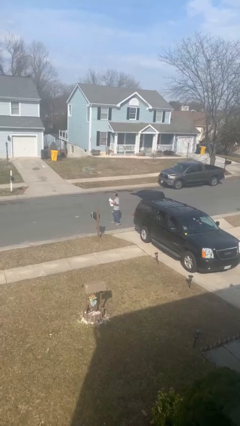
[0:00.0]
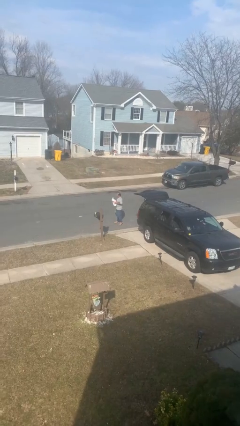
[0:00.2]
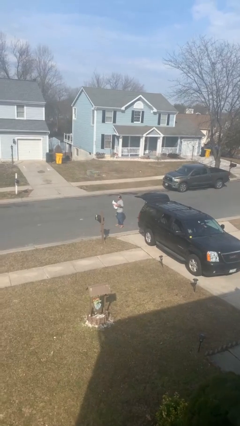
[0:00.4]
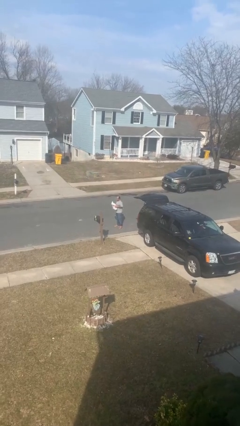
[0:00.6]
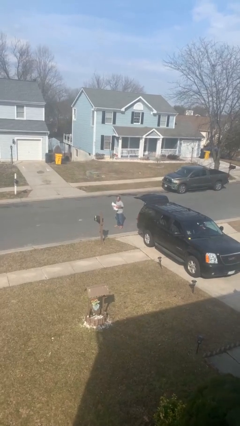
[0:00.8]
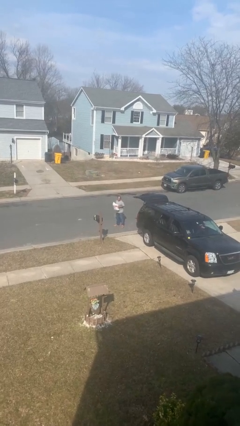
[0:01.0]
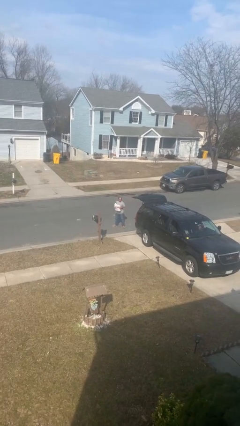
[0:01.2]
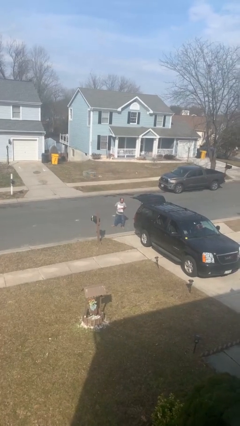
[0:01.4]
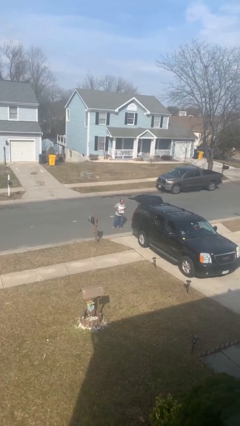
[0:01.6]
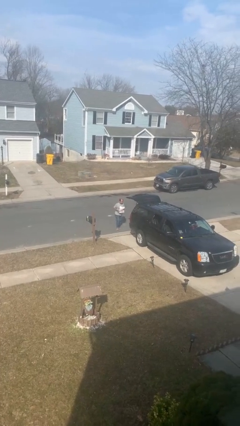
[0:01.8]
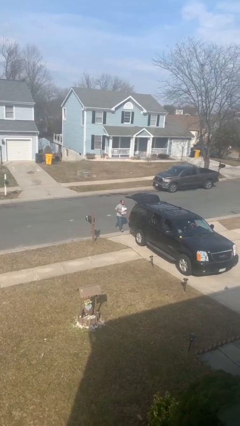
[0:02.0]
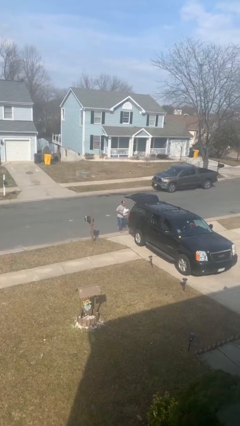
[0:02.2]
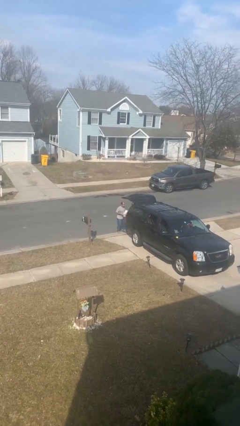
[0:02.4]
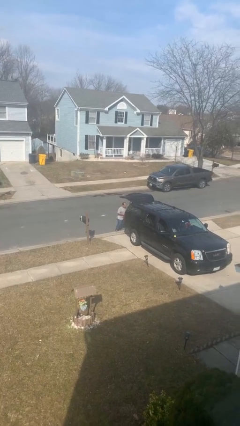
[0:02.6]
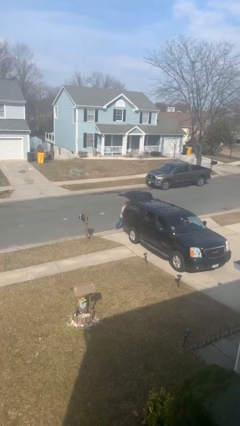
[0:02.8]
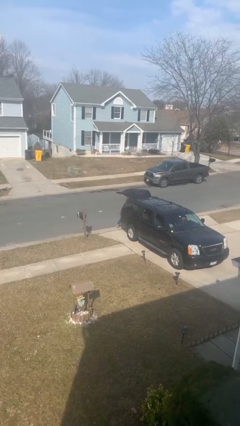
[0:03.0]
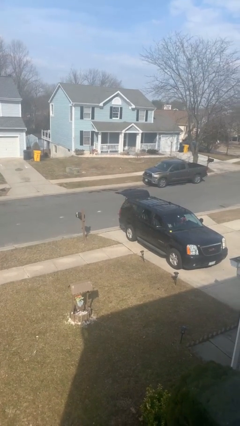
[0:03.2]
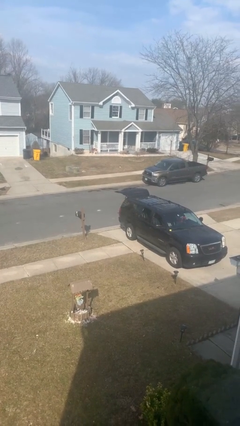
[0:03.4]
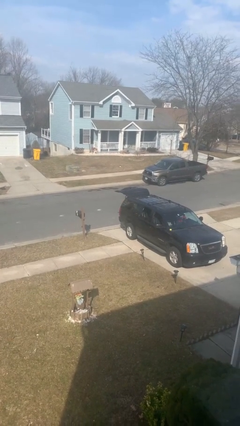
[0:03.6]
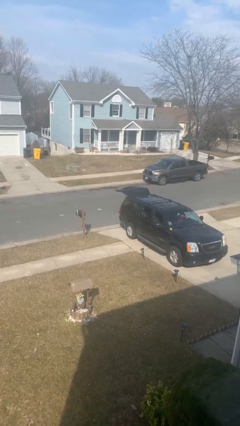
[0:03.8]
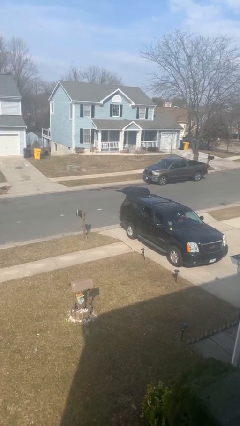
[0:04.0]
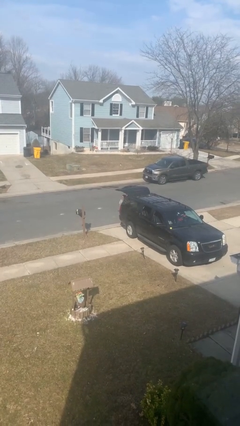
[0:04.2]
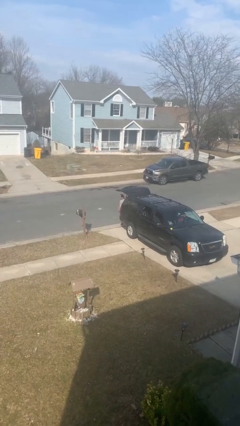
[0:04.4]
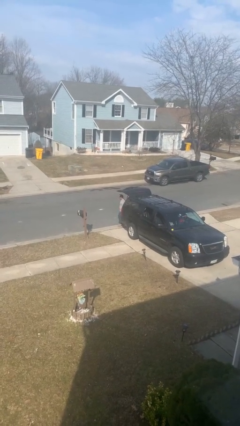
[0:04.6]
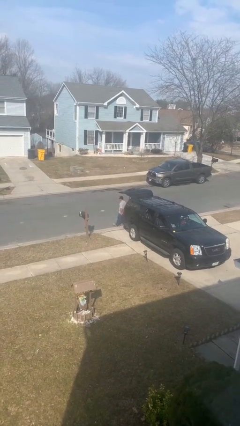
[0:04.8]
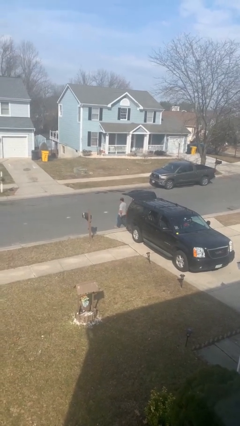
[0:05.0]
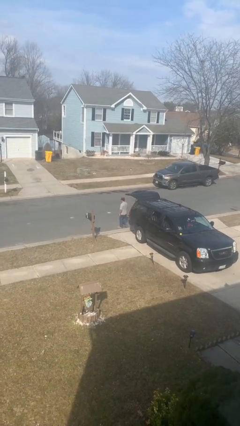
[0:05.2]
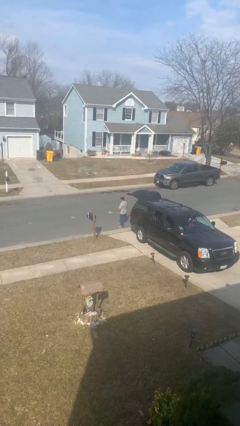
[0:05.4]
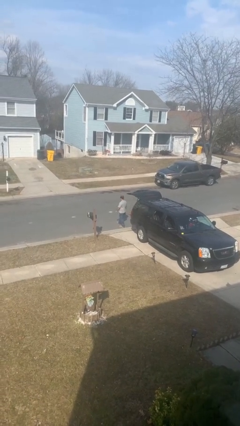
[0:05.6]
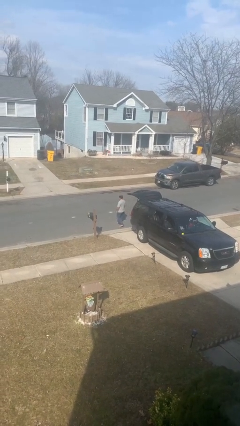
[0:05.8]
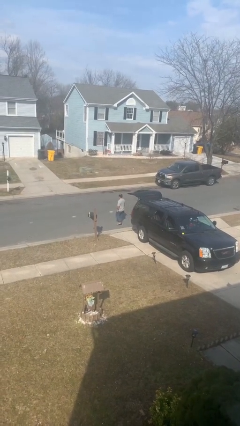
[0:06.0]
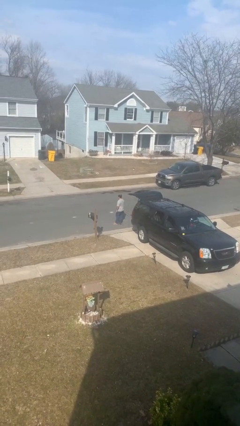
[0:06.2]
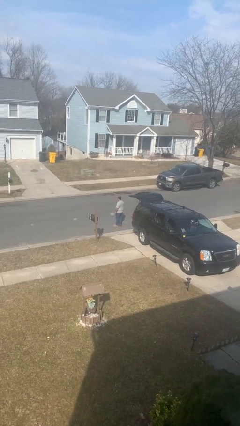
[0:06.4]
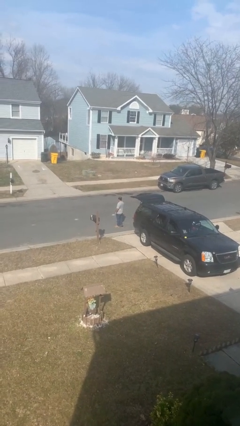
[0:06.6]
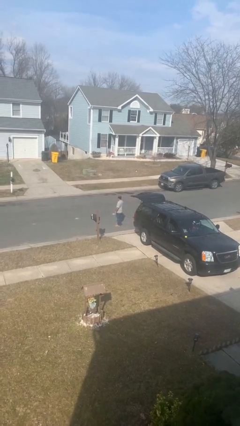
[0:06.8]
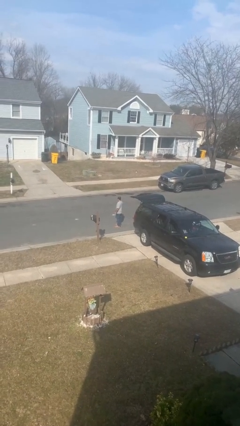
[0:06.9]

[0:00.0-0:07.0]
person loads car

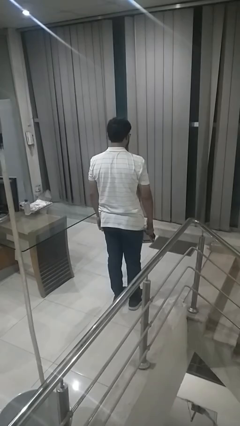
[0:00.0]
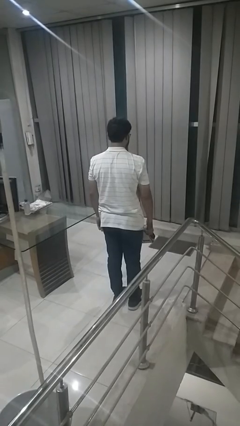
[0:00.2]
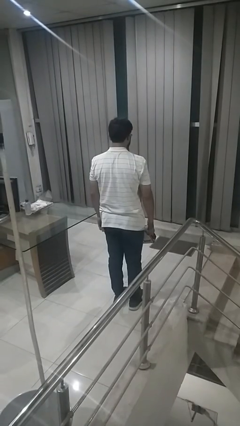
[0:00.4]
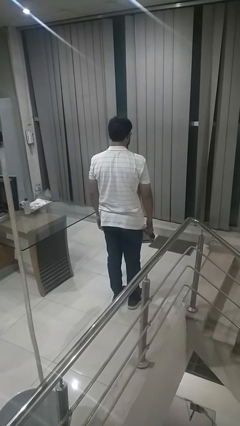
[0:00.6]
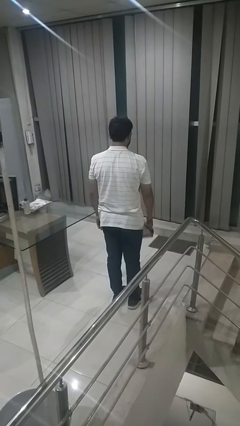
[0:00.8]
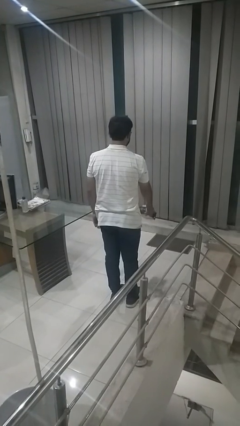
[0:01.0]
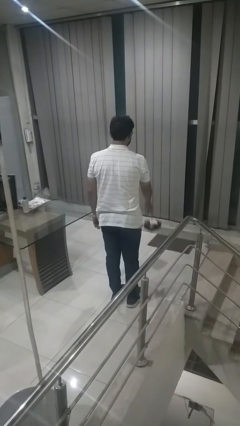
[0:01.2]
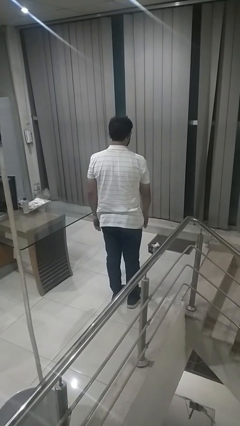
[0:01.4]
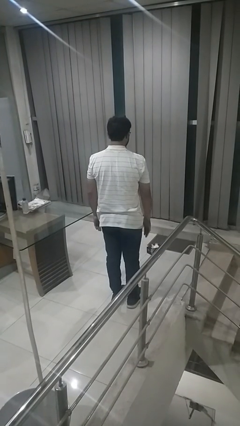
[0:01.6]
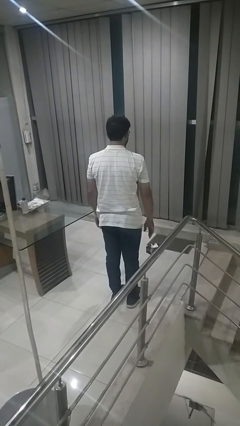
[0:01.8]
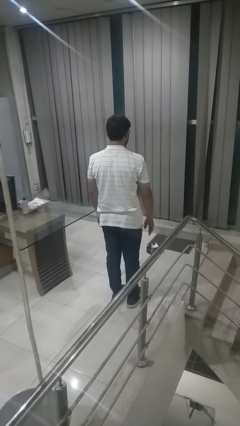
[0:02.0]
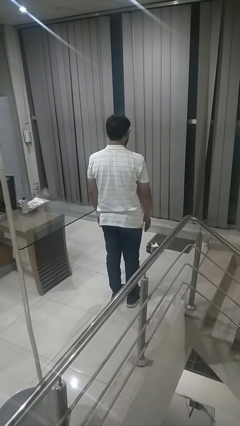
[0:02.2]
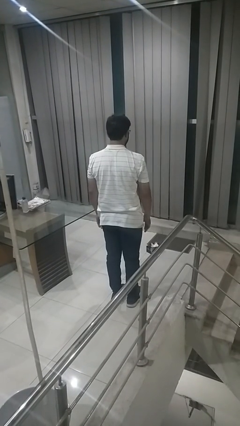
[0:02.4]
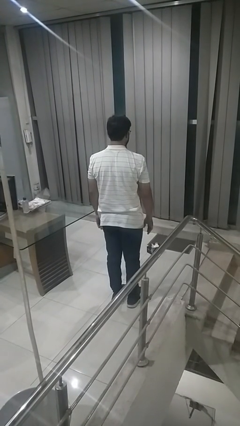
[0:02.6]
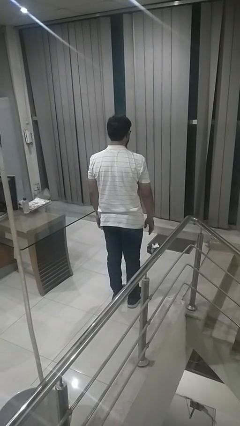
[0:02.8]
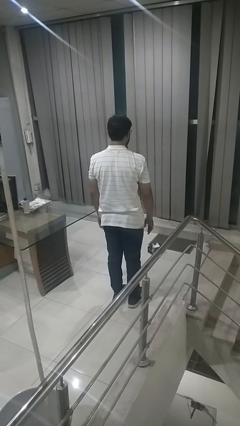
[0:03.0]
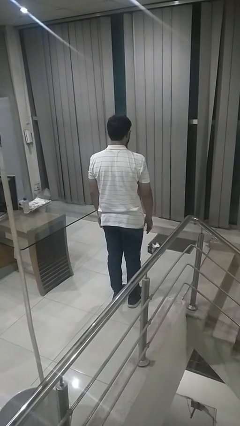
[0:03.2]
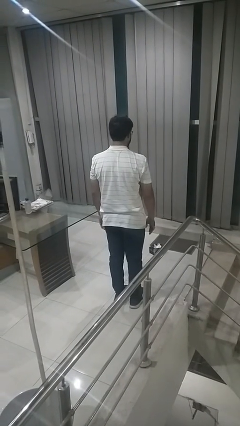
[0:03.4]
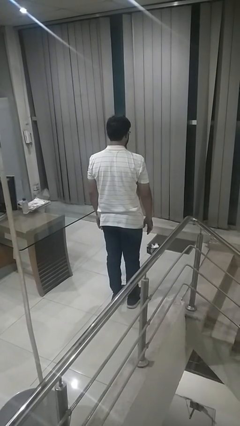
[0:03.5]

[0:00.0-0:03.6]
person throws object to ground

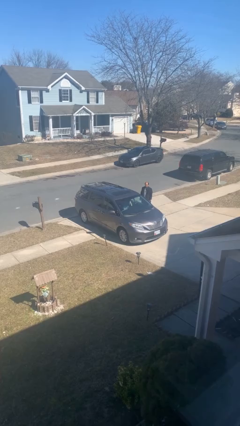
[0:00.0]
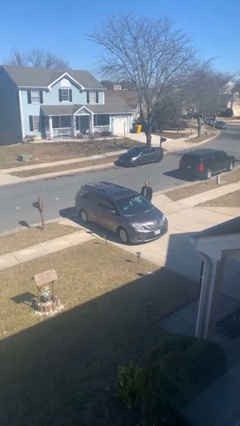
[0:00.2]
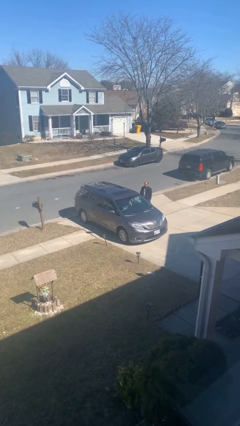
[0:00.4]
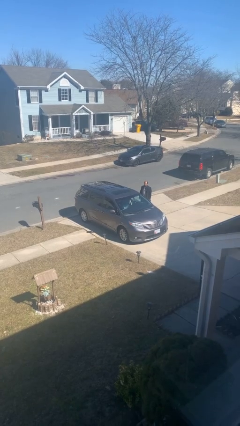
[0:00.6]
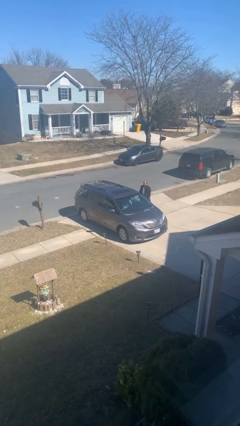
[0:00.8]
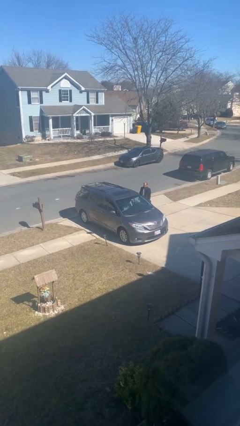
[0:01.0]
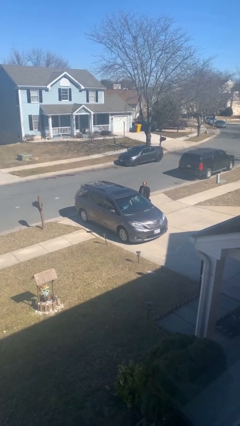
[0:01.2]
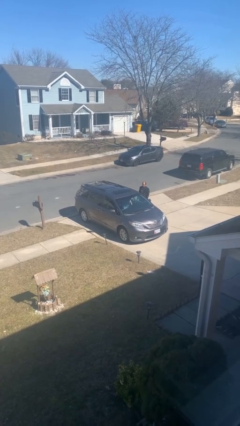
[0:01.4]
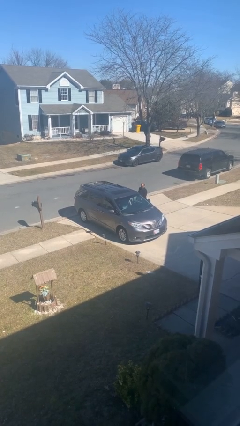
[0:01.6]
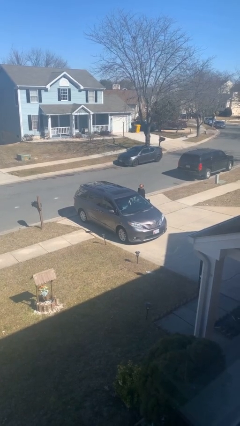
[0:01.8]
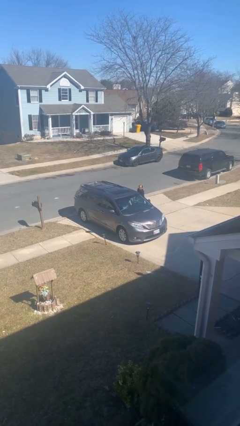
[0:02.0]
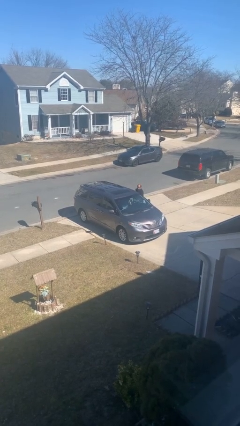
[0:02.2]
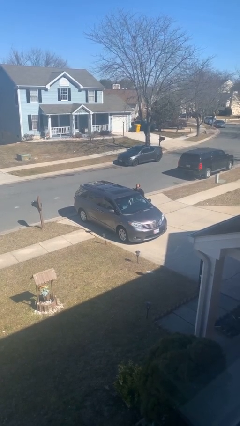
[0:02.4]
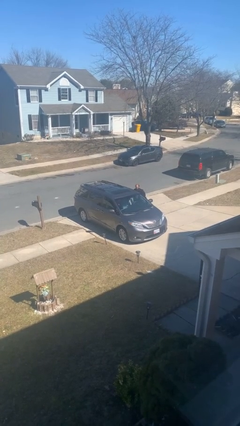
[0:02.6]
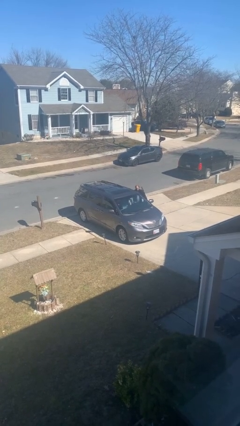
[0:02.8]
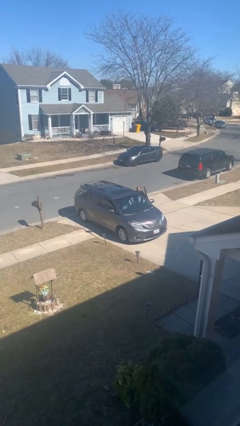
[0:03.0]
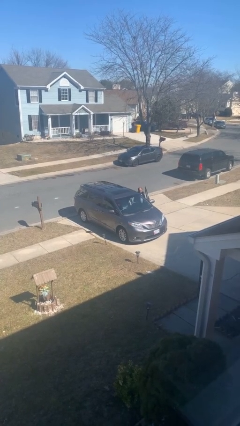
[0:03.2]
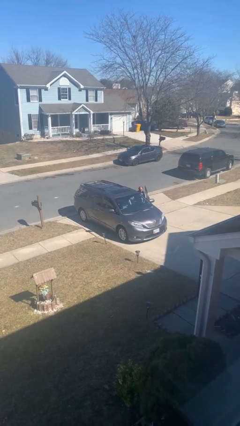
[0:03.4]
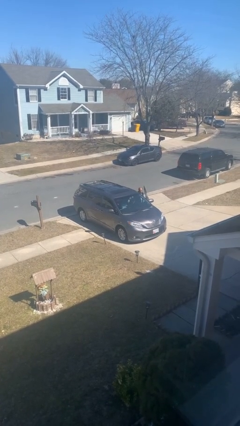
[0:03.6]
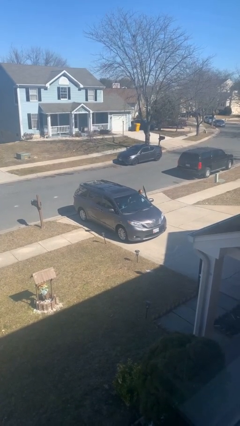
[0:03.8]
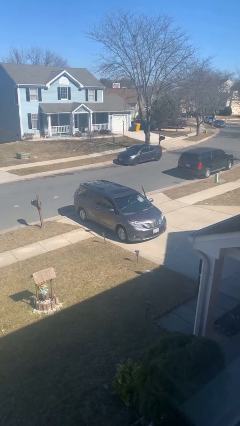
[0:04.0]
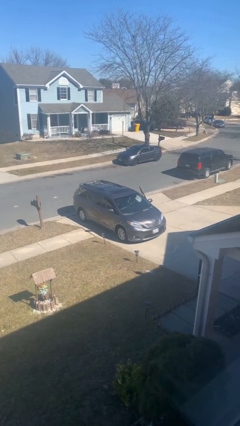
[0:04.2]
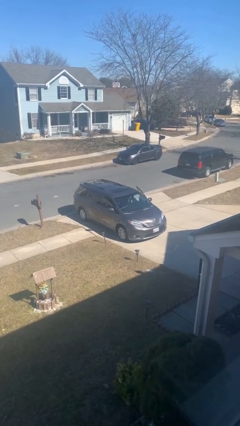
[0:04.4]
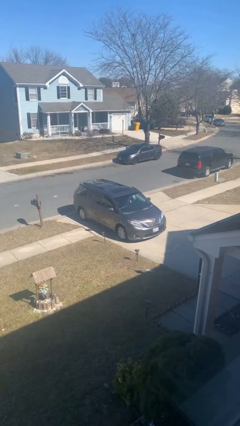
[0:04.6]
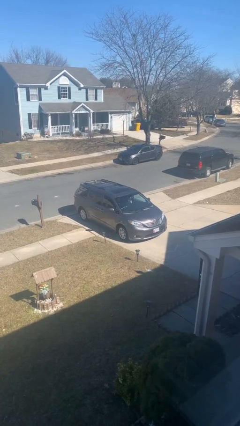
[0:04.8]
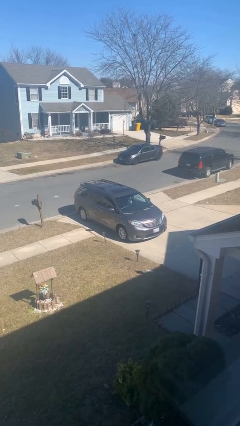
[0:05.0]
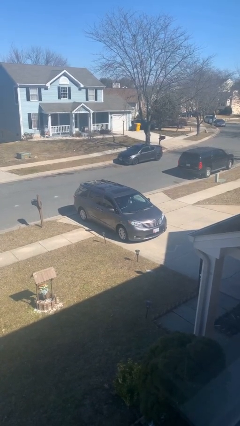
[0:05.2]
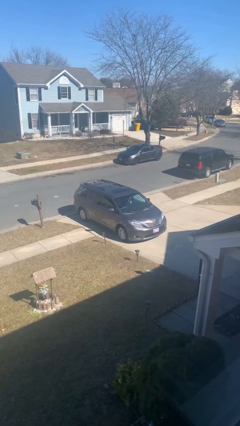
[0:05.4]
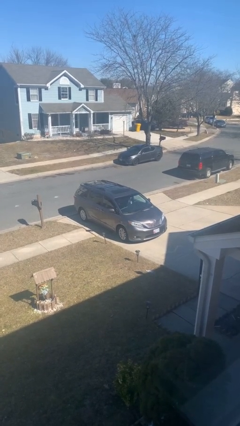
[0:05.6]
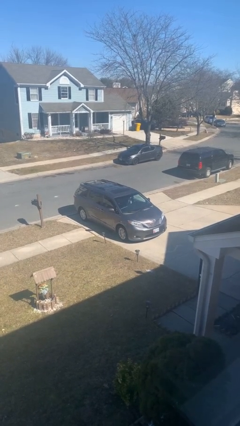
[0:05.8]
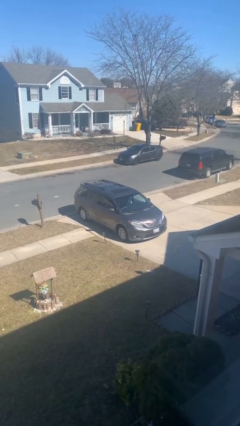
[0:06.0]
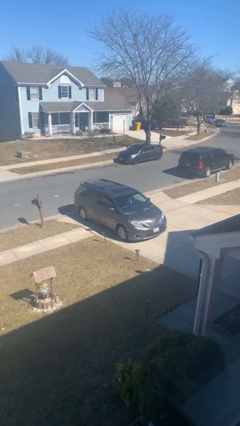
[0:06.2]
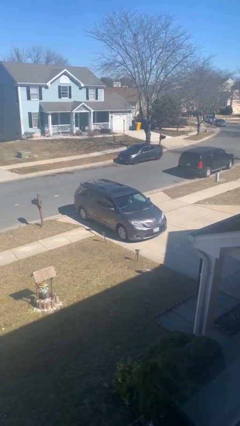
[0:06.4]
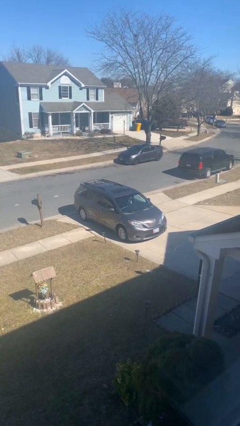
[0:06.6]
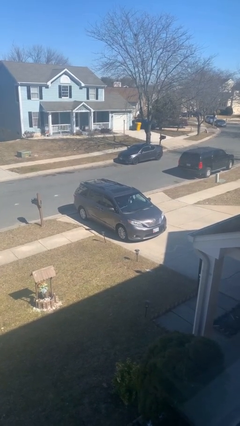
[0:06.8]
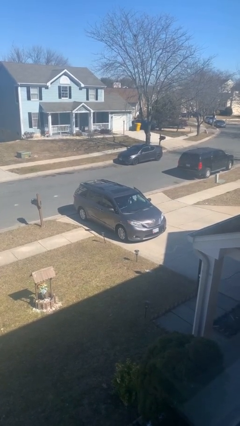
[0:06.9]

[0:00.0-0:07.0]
car picks up person

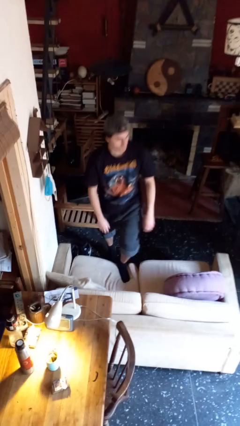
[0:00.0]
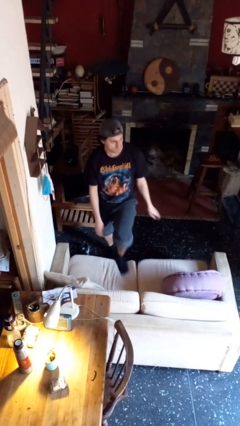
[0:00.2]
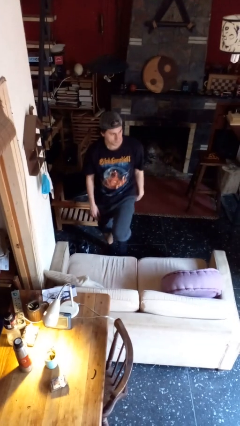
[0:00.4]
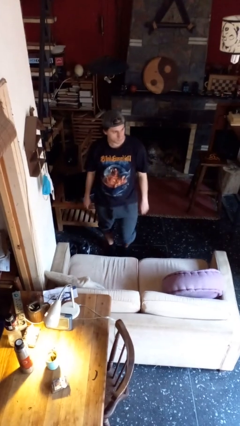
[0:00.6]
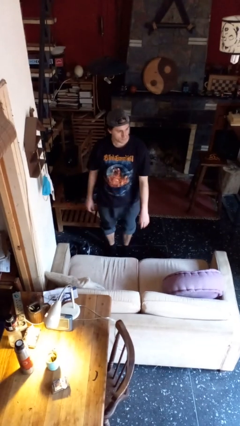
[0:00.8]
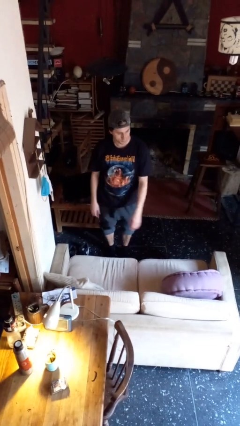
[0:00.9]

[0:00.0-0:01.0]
person climbs off couch
